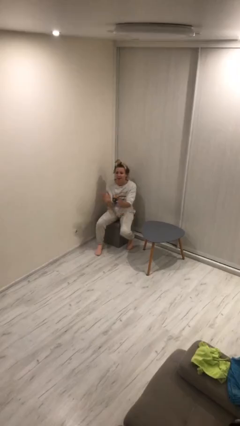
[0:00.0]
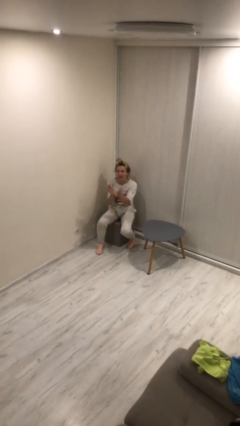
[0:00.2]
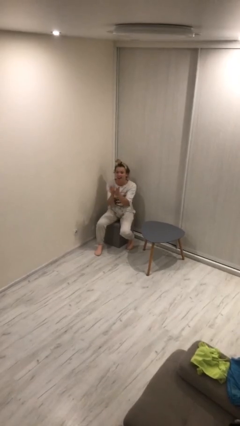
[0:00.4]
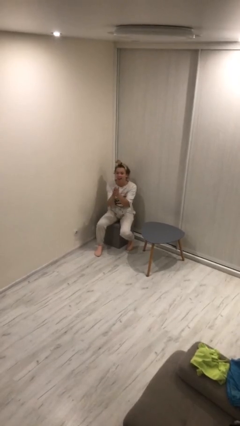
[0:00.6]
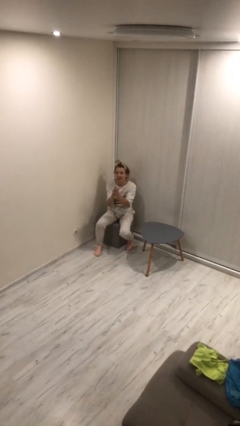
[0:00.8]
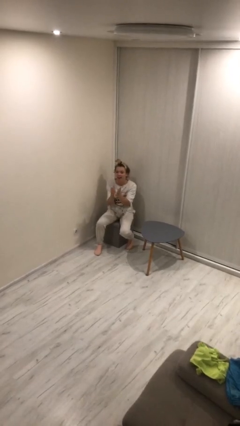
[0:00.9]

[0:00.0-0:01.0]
person claps hands

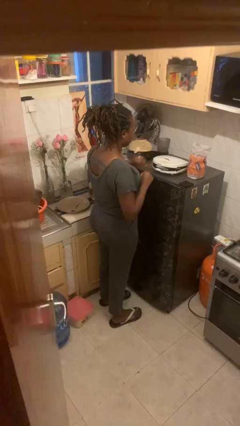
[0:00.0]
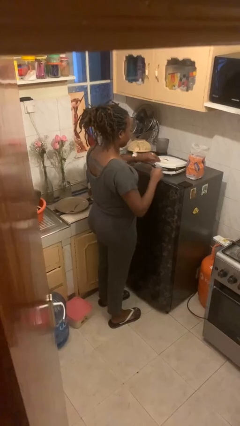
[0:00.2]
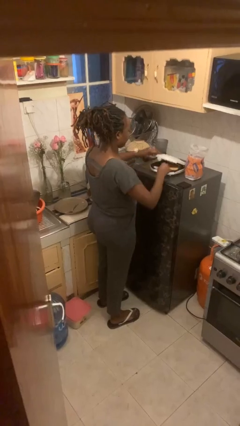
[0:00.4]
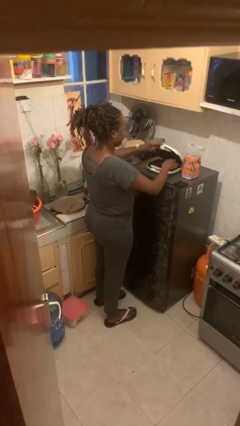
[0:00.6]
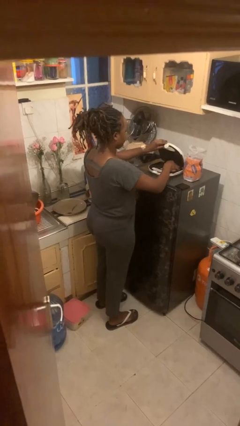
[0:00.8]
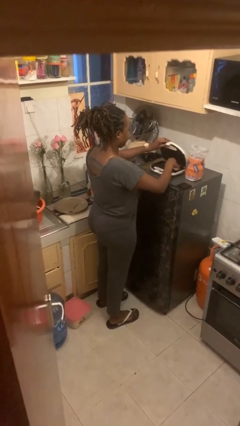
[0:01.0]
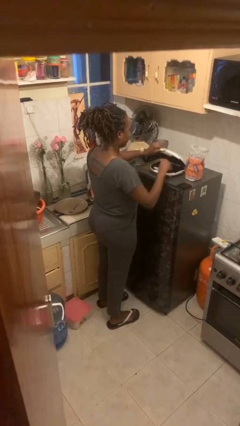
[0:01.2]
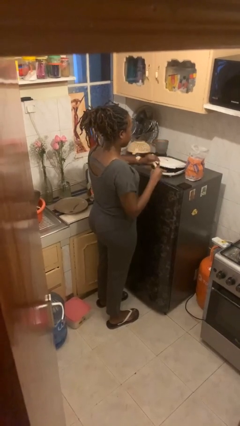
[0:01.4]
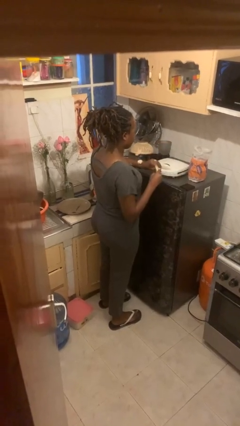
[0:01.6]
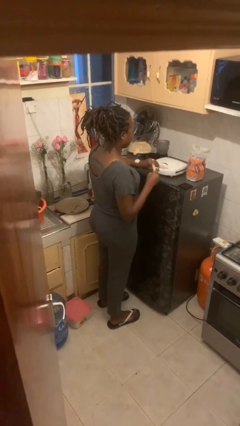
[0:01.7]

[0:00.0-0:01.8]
person takes object from toaster

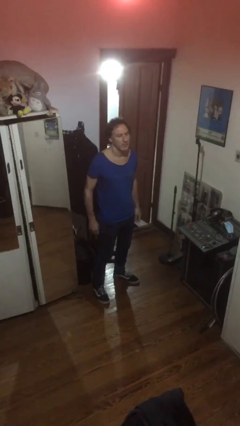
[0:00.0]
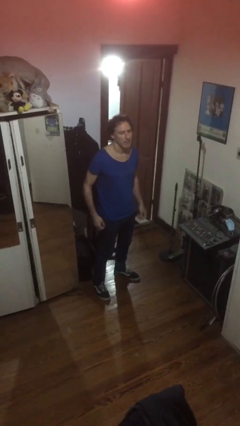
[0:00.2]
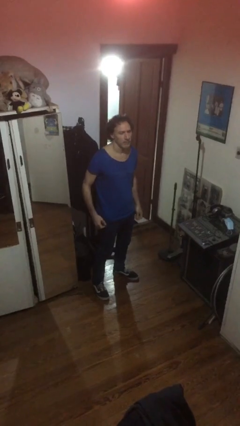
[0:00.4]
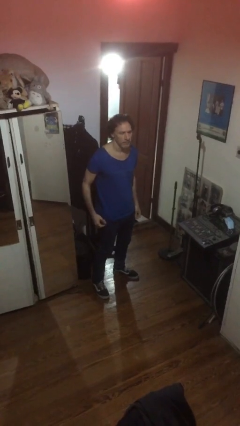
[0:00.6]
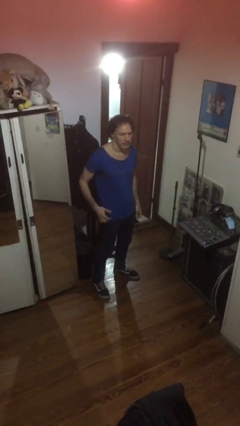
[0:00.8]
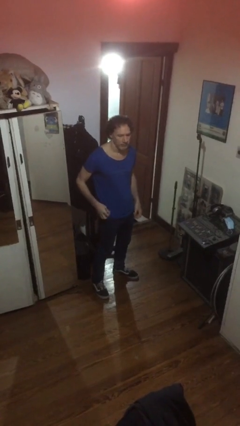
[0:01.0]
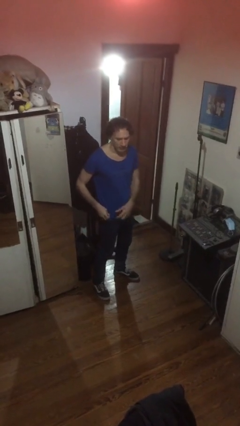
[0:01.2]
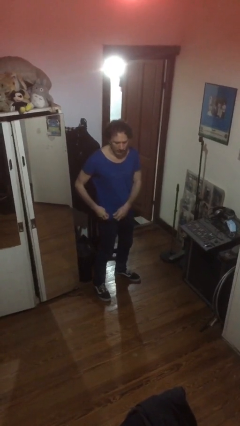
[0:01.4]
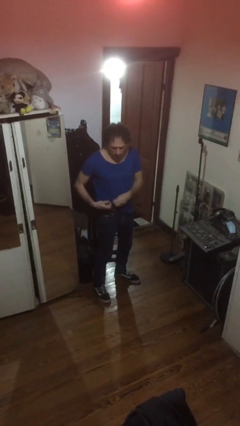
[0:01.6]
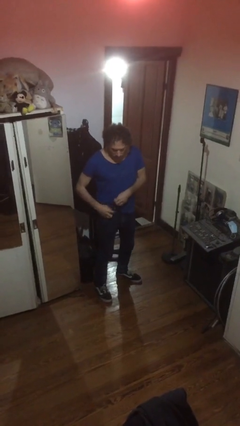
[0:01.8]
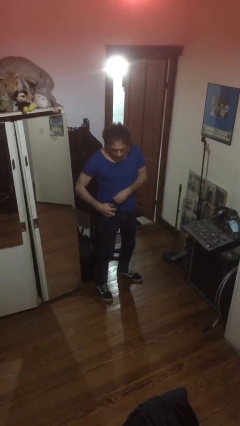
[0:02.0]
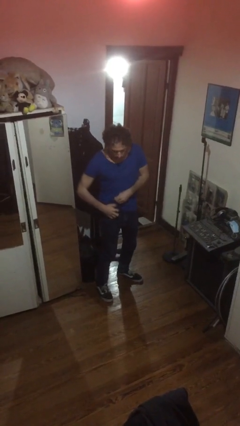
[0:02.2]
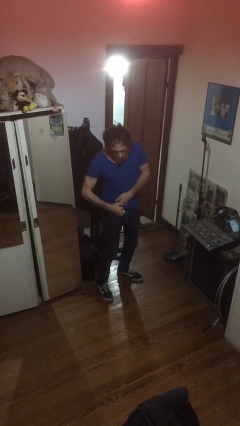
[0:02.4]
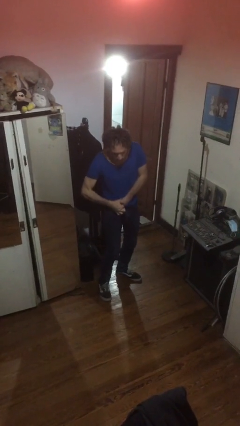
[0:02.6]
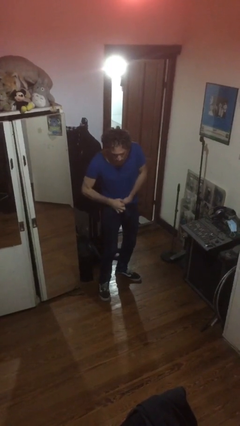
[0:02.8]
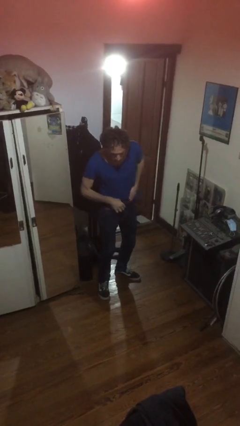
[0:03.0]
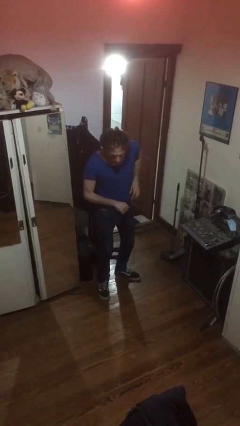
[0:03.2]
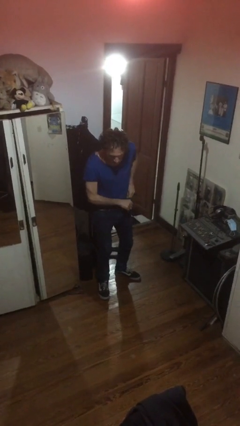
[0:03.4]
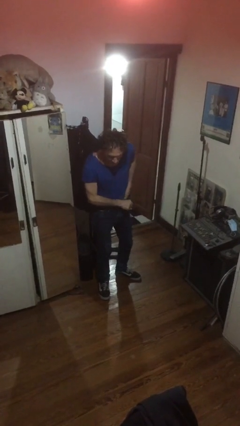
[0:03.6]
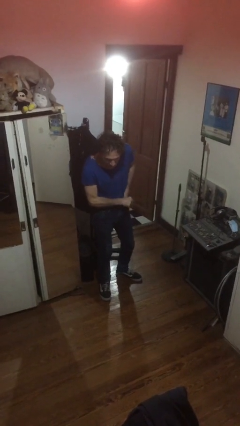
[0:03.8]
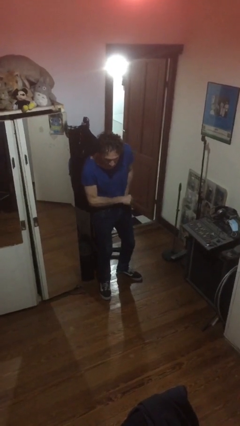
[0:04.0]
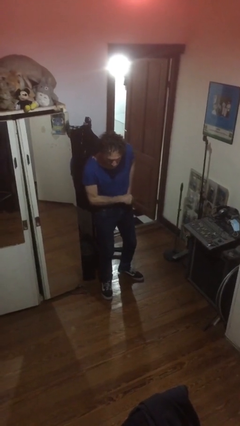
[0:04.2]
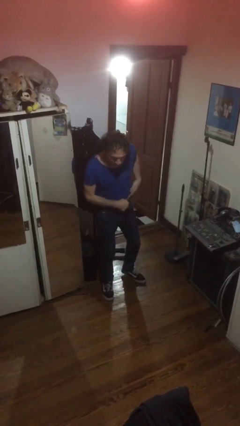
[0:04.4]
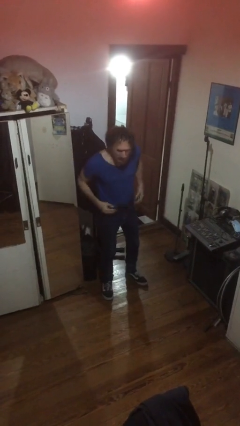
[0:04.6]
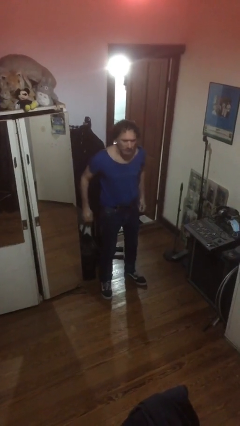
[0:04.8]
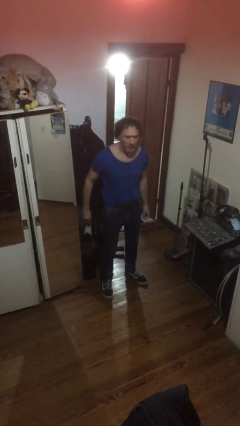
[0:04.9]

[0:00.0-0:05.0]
person tucks in shirt

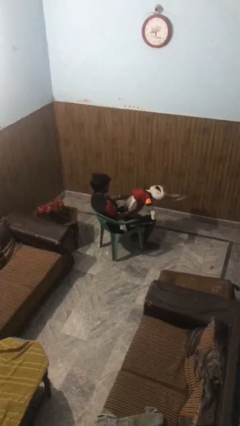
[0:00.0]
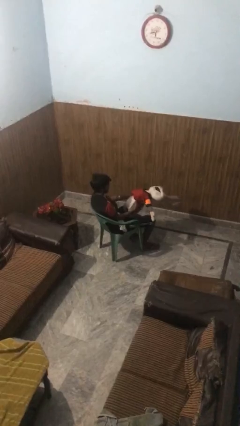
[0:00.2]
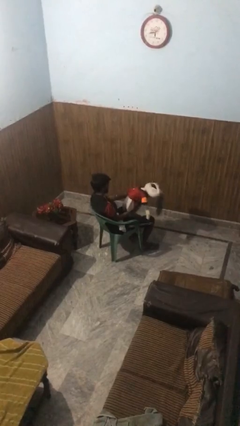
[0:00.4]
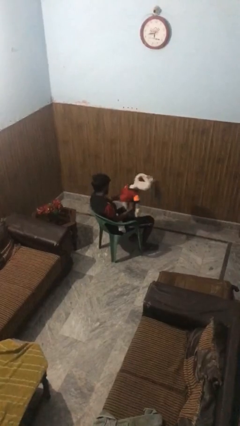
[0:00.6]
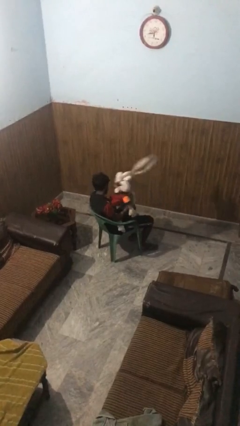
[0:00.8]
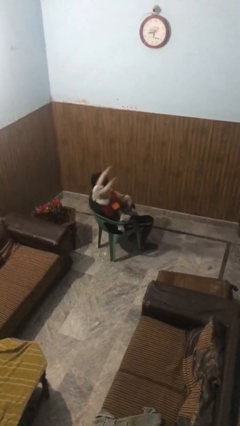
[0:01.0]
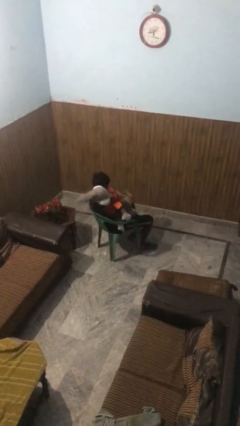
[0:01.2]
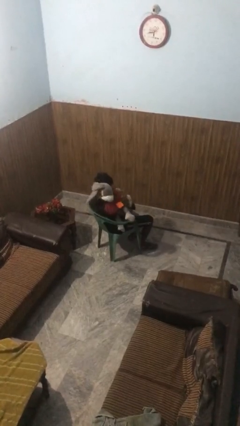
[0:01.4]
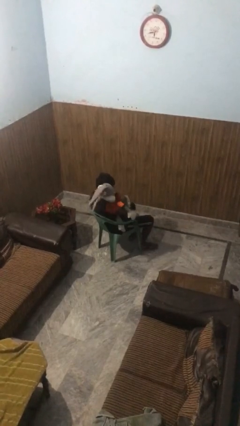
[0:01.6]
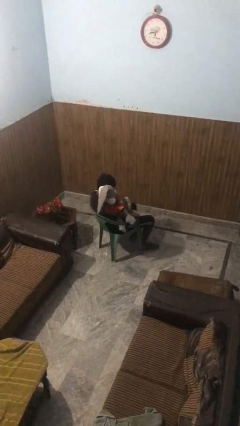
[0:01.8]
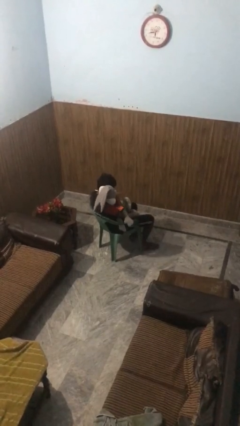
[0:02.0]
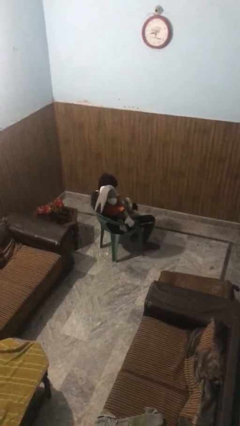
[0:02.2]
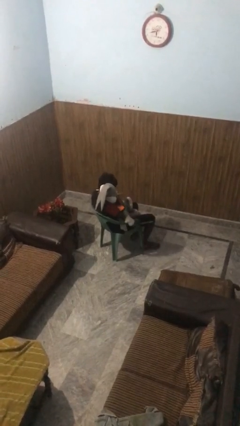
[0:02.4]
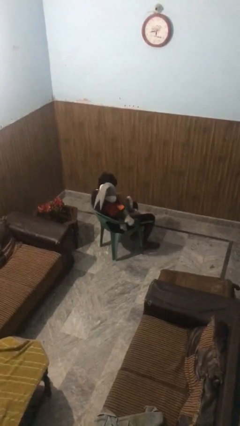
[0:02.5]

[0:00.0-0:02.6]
person hugs stuffed animal

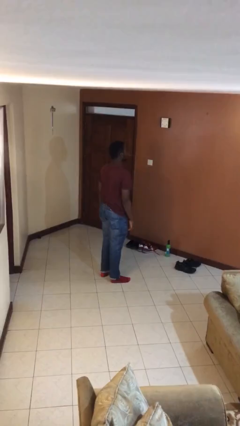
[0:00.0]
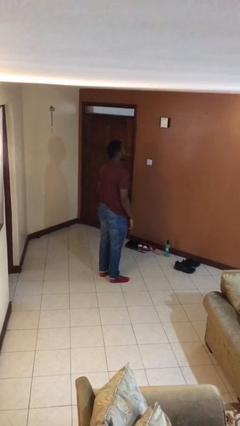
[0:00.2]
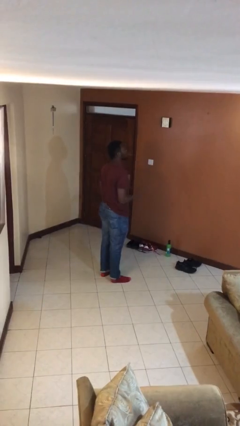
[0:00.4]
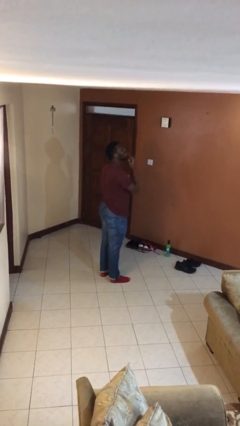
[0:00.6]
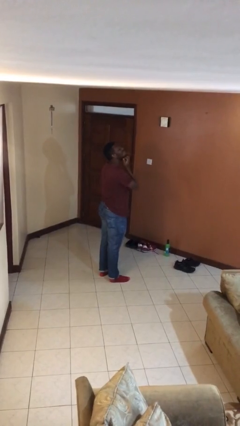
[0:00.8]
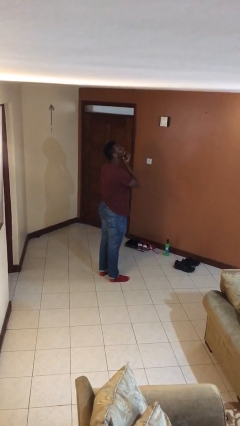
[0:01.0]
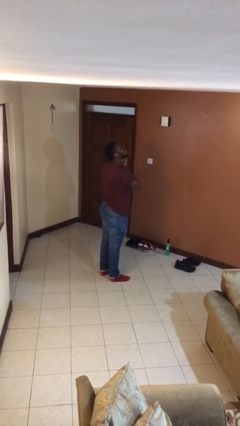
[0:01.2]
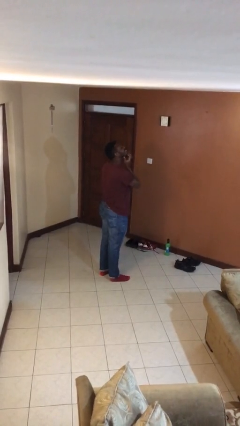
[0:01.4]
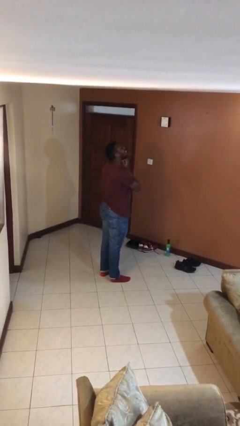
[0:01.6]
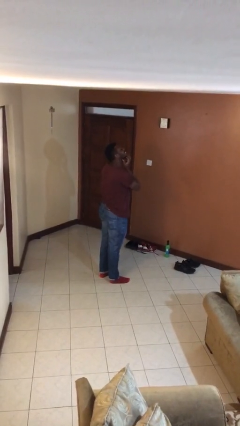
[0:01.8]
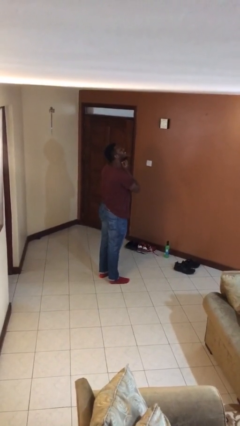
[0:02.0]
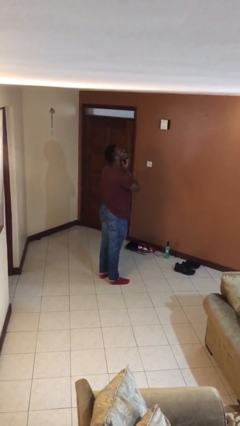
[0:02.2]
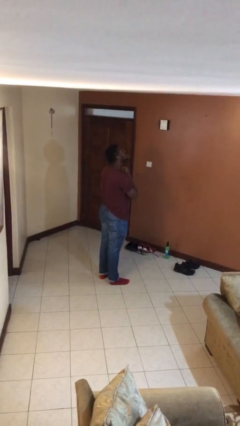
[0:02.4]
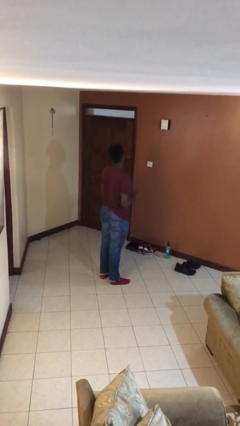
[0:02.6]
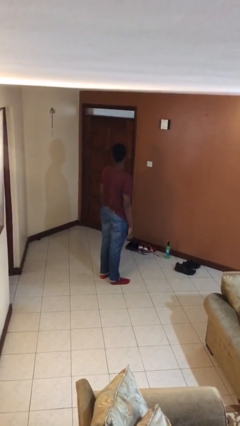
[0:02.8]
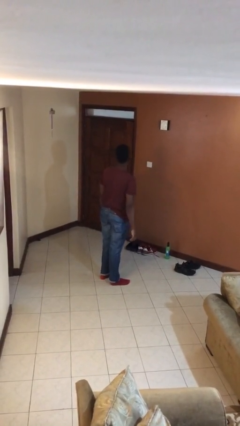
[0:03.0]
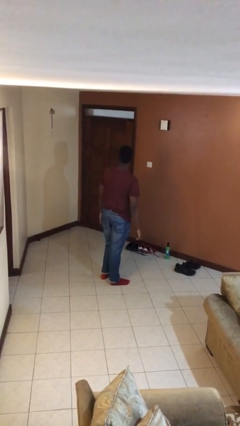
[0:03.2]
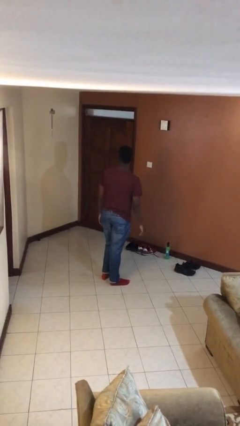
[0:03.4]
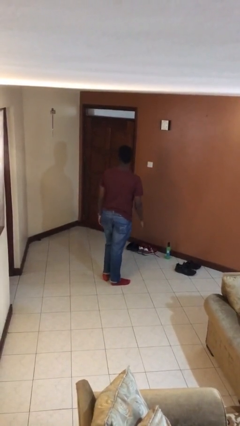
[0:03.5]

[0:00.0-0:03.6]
person scratches face

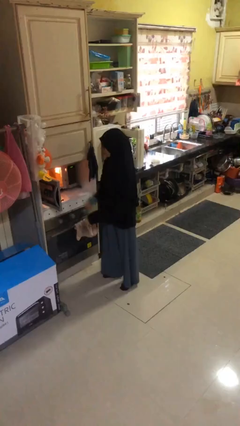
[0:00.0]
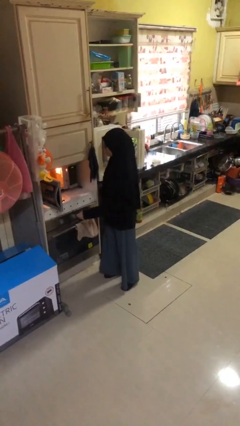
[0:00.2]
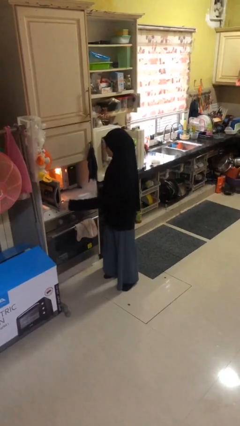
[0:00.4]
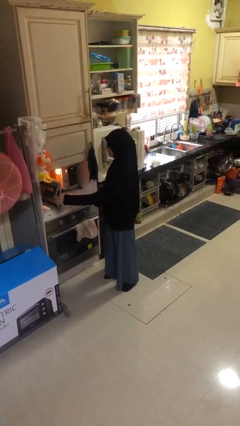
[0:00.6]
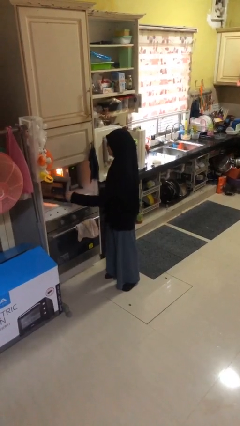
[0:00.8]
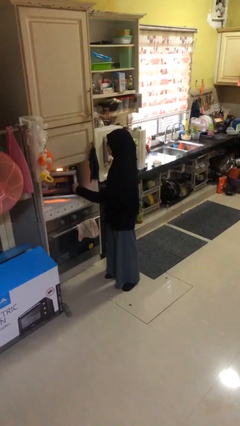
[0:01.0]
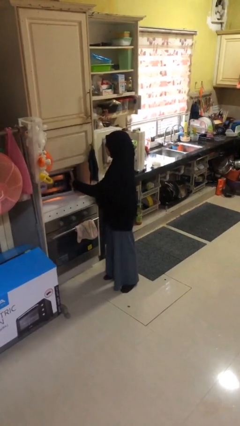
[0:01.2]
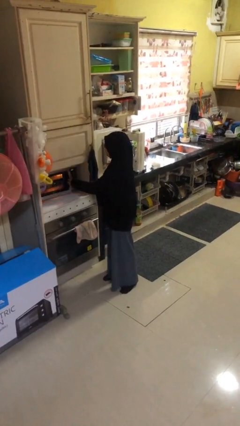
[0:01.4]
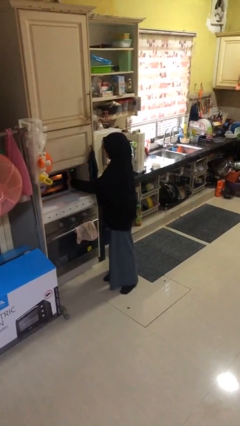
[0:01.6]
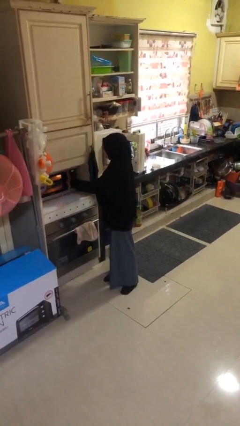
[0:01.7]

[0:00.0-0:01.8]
person closes microwave

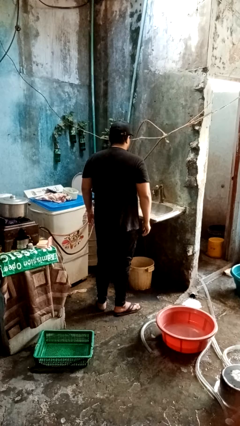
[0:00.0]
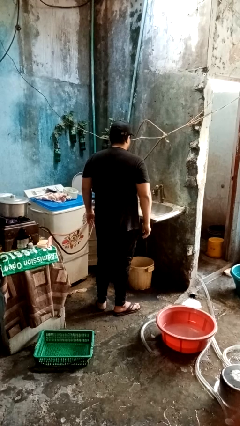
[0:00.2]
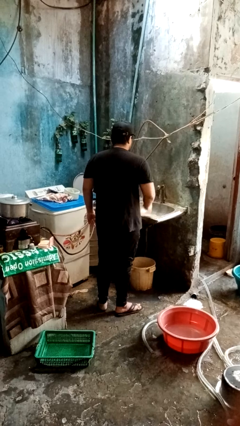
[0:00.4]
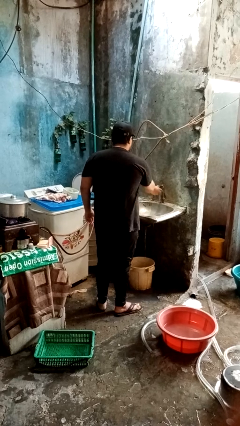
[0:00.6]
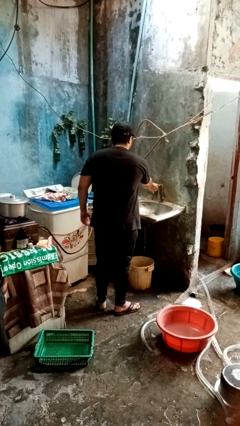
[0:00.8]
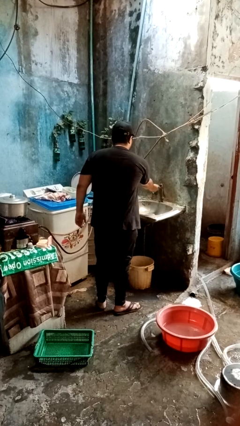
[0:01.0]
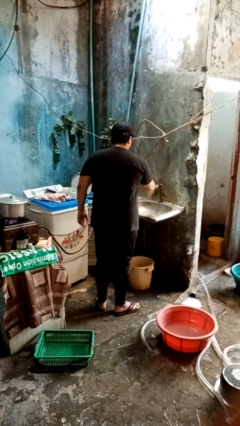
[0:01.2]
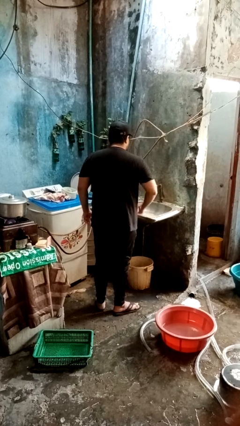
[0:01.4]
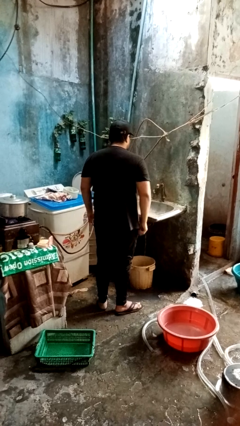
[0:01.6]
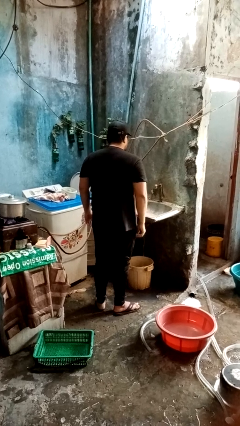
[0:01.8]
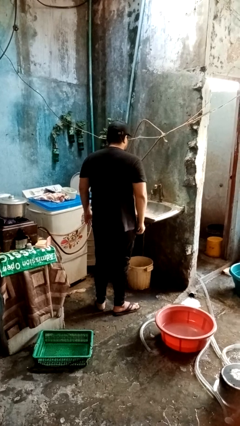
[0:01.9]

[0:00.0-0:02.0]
person turns off faucet
